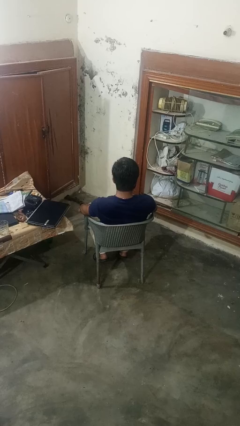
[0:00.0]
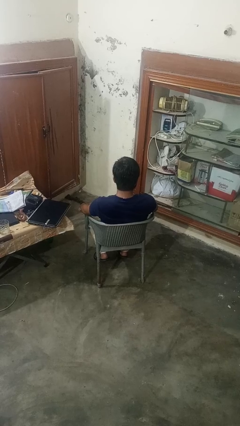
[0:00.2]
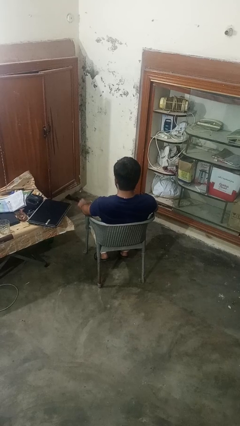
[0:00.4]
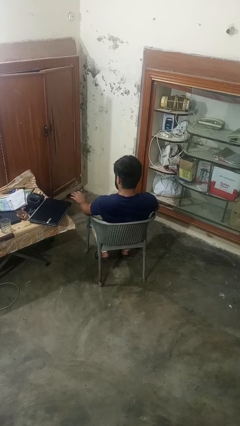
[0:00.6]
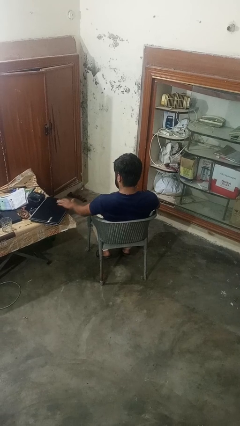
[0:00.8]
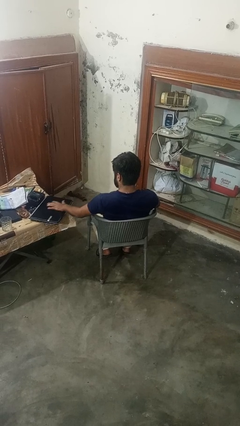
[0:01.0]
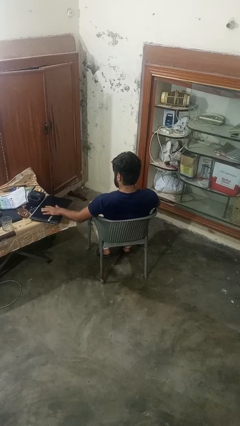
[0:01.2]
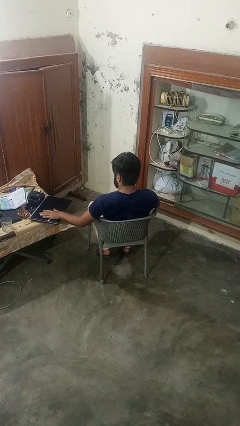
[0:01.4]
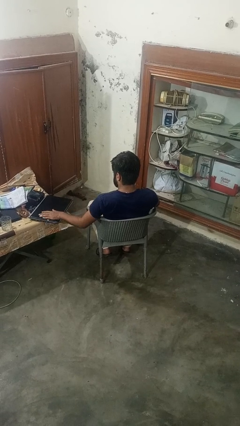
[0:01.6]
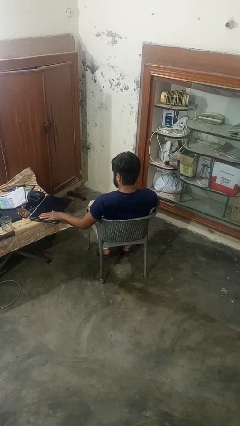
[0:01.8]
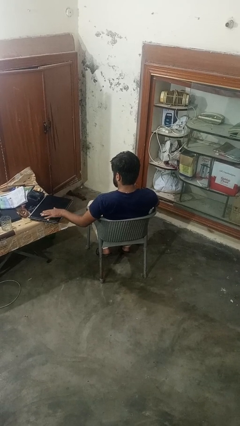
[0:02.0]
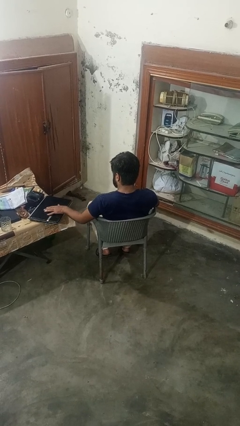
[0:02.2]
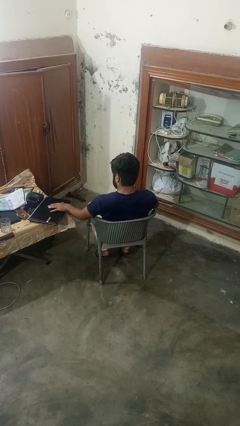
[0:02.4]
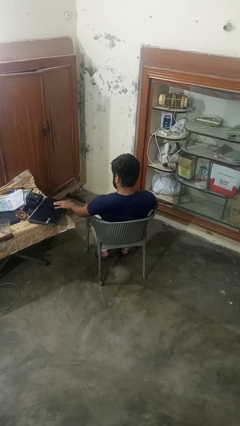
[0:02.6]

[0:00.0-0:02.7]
person waves hand over object

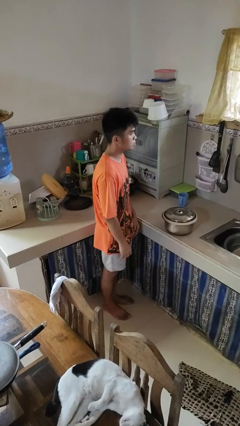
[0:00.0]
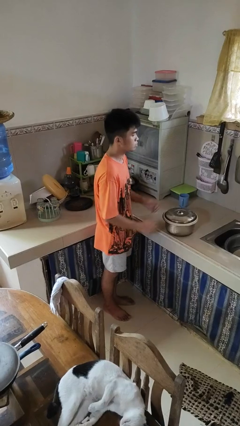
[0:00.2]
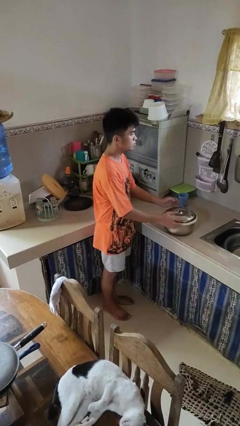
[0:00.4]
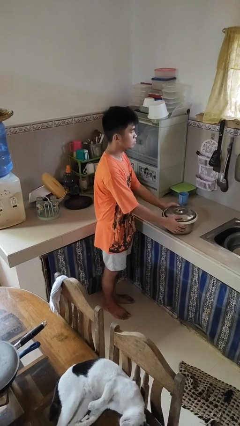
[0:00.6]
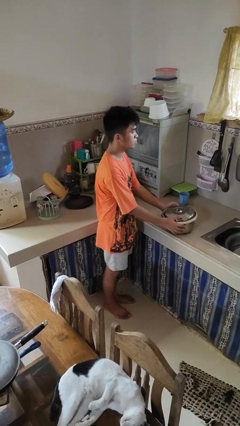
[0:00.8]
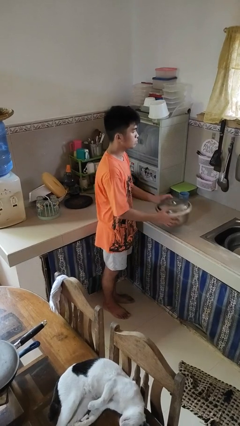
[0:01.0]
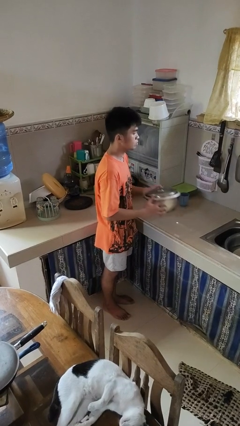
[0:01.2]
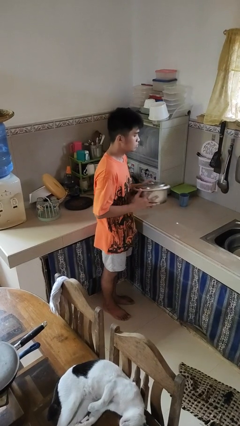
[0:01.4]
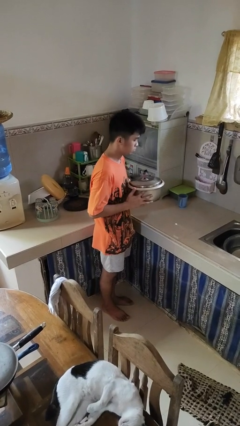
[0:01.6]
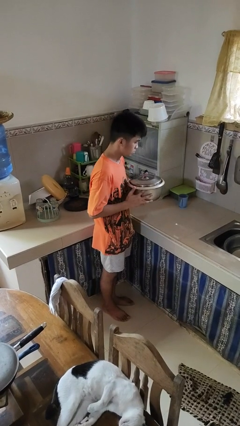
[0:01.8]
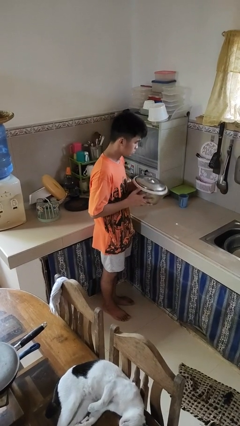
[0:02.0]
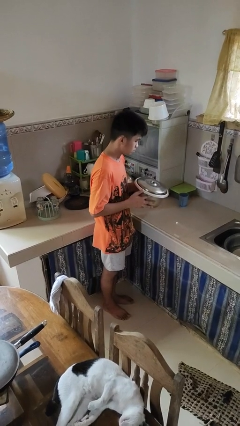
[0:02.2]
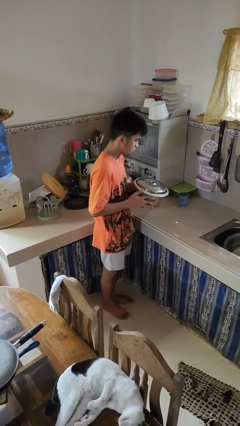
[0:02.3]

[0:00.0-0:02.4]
person picks up object from countertop

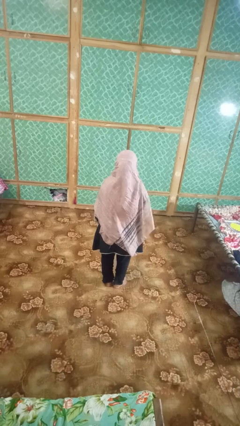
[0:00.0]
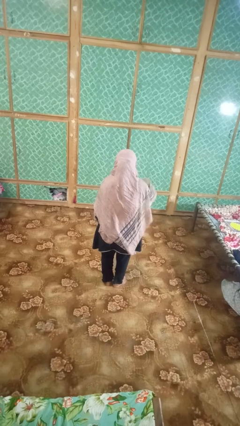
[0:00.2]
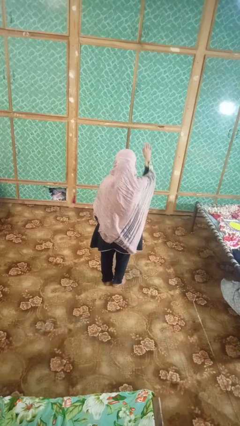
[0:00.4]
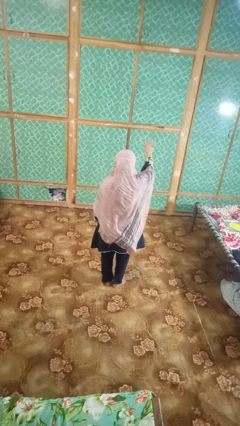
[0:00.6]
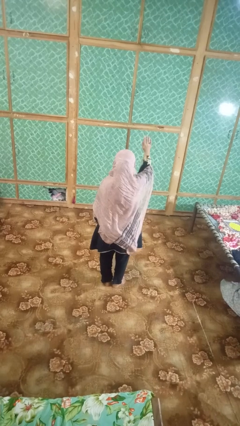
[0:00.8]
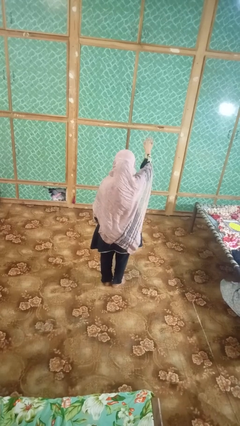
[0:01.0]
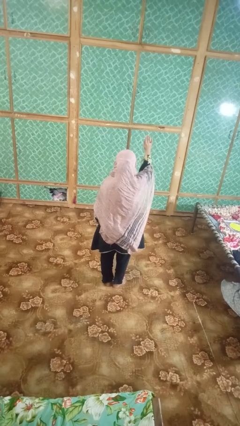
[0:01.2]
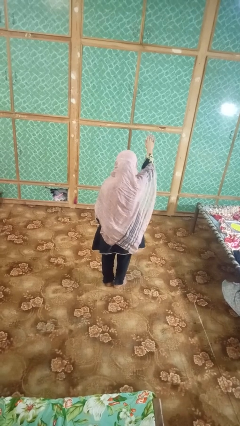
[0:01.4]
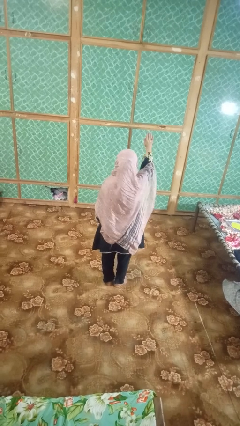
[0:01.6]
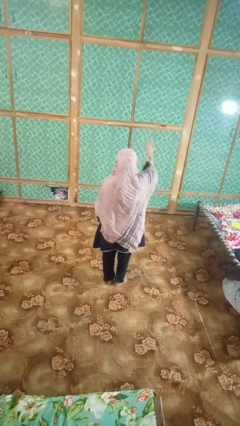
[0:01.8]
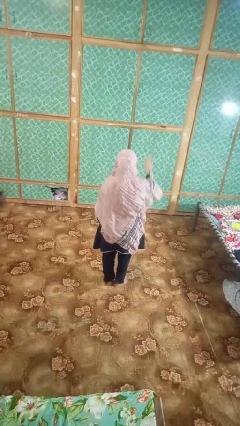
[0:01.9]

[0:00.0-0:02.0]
person gestures stop

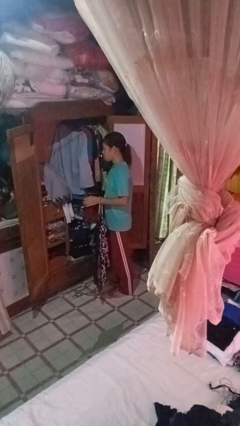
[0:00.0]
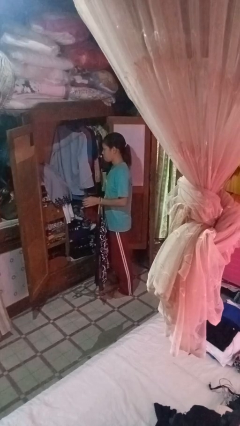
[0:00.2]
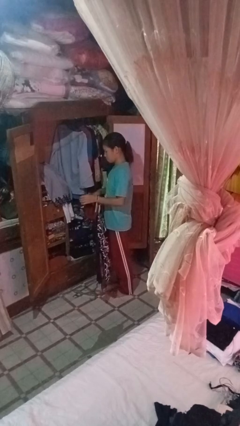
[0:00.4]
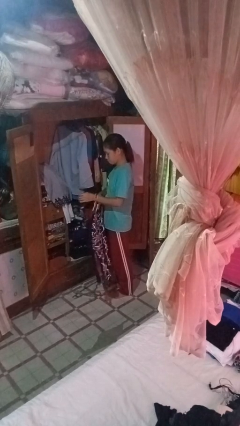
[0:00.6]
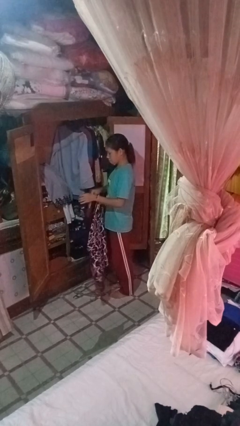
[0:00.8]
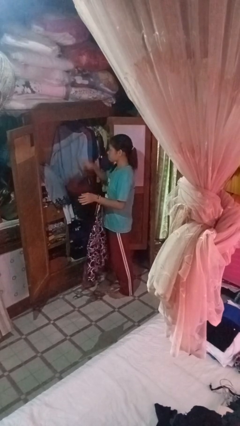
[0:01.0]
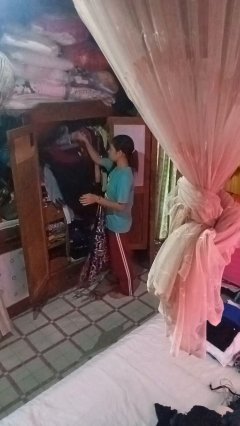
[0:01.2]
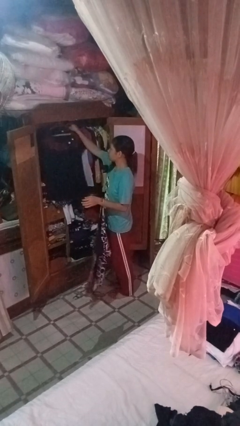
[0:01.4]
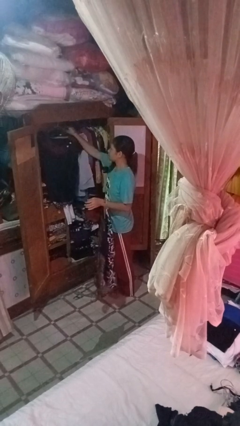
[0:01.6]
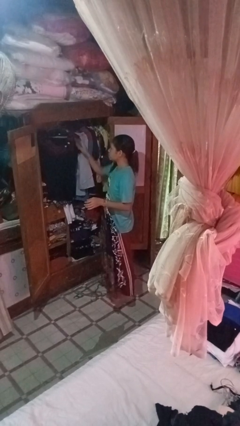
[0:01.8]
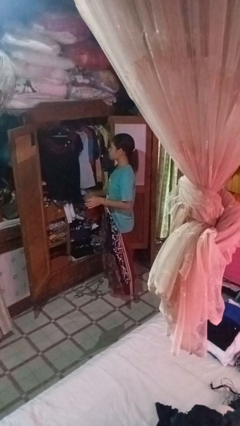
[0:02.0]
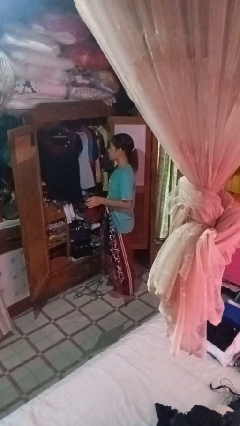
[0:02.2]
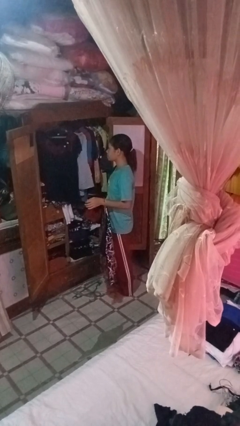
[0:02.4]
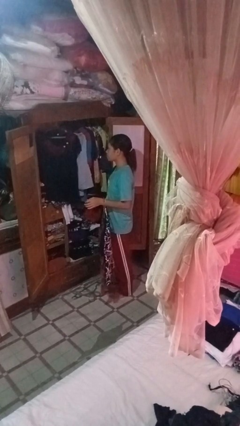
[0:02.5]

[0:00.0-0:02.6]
person puts clothes into closet

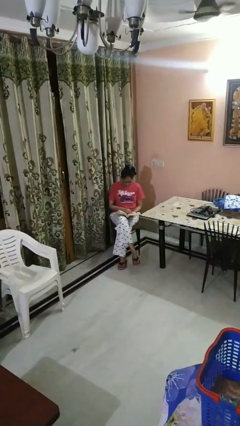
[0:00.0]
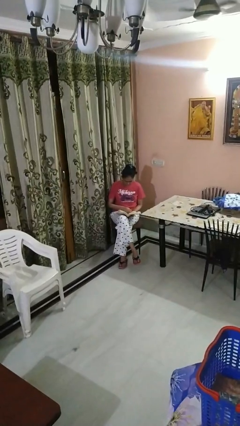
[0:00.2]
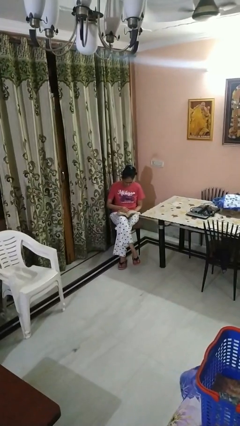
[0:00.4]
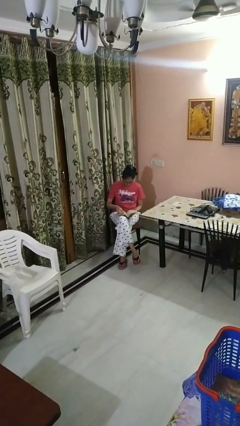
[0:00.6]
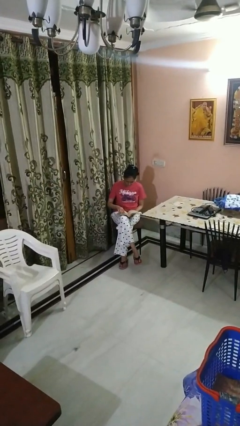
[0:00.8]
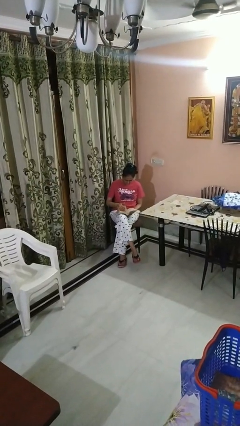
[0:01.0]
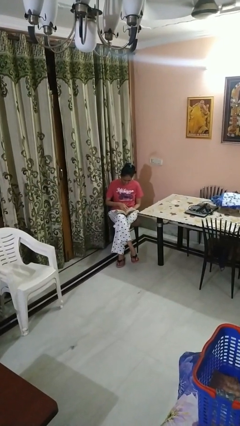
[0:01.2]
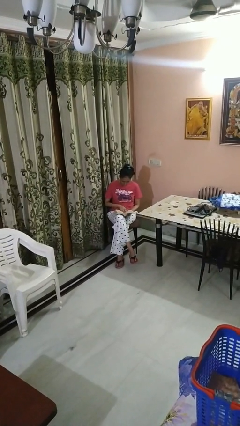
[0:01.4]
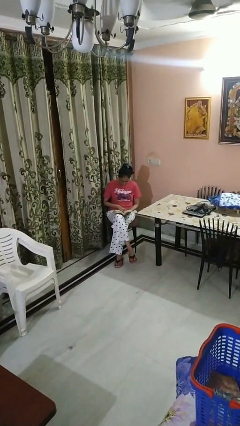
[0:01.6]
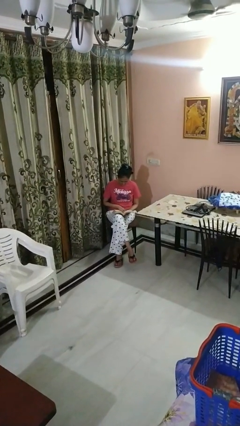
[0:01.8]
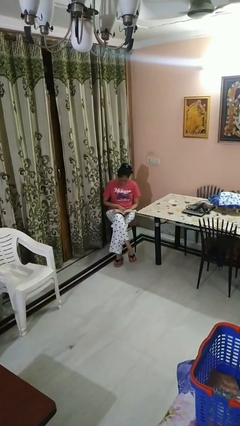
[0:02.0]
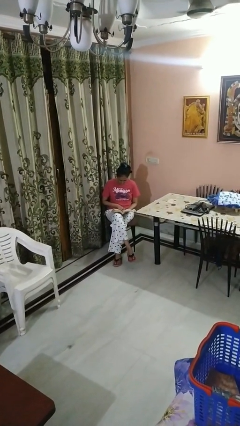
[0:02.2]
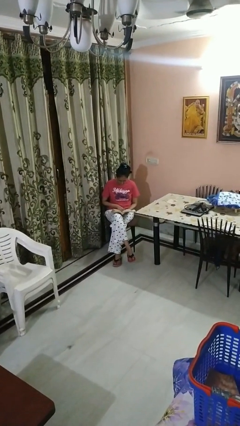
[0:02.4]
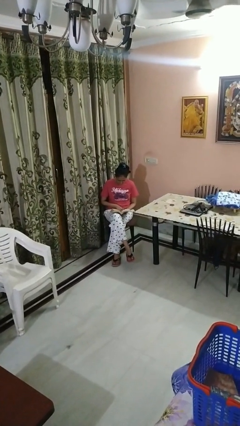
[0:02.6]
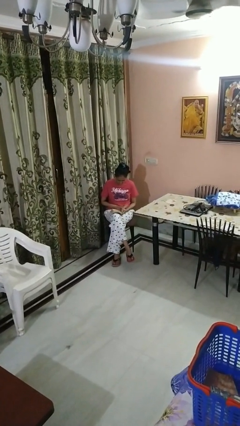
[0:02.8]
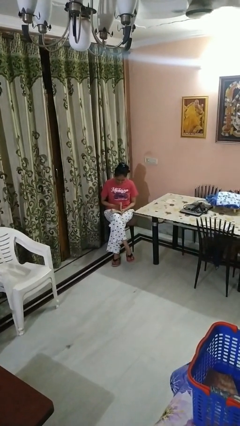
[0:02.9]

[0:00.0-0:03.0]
person reads book

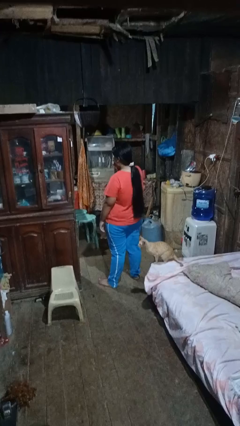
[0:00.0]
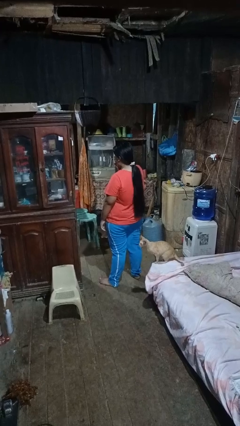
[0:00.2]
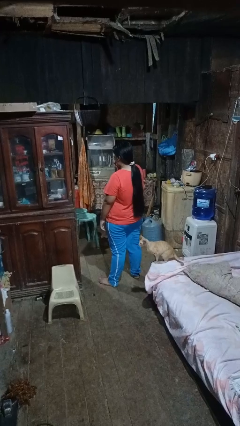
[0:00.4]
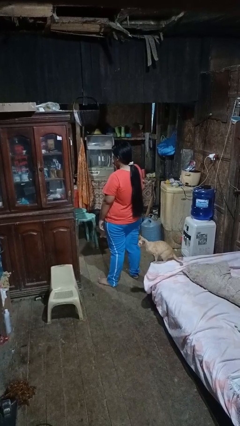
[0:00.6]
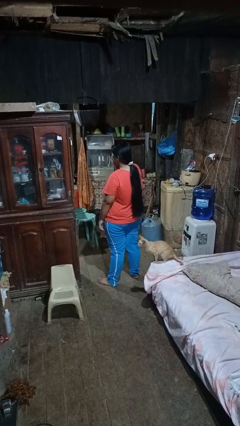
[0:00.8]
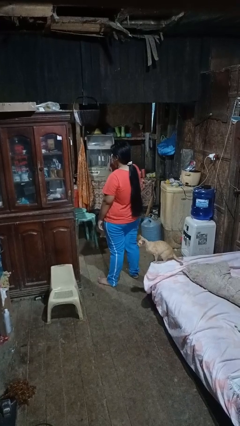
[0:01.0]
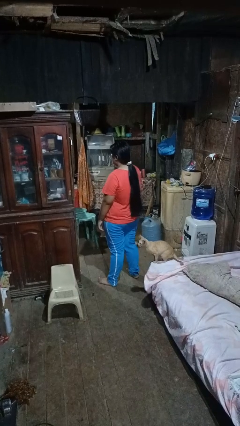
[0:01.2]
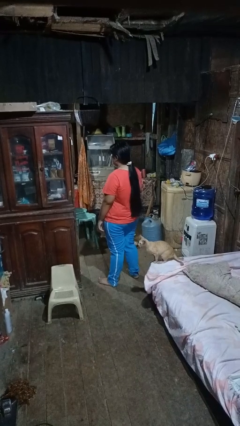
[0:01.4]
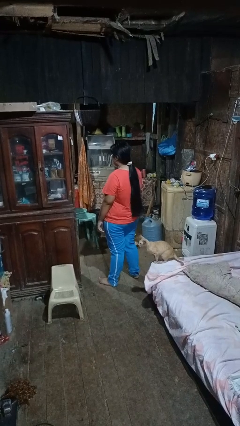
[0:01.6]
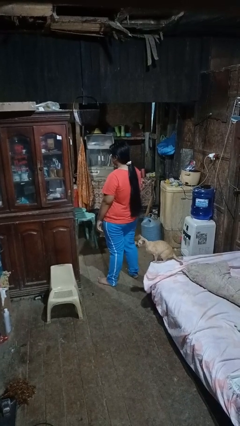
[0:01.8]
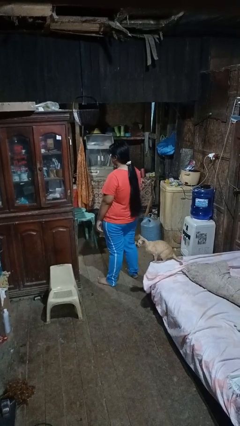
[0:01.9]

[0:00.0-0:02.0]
person yawns

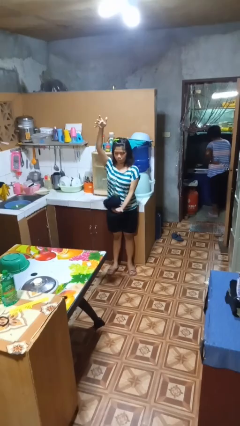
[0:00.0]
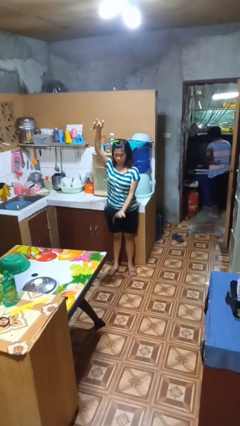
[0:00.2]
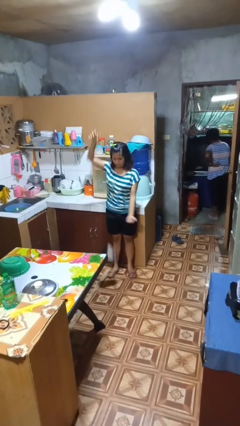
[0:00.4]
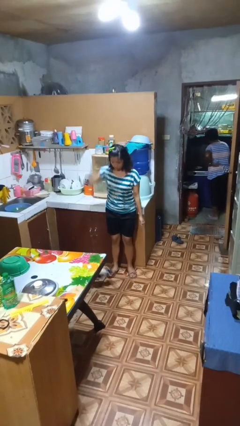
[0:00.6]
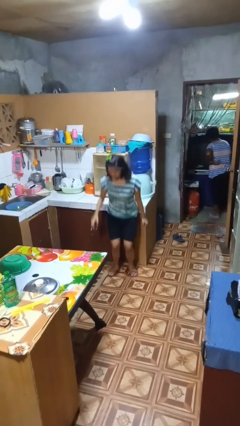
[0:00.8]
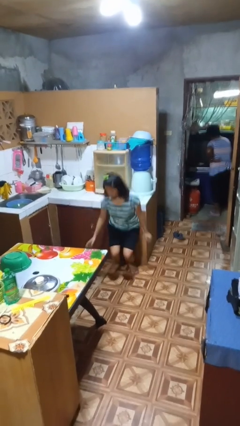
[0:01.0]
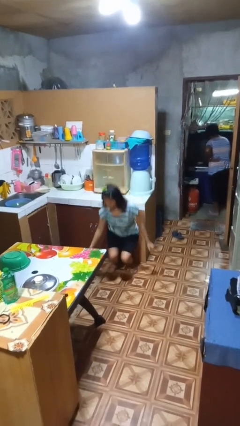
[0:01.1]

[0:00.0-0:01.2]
person catches dropped object

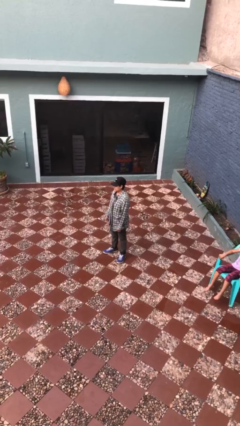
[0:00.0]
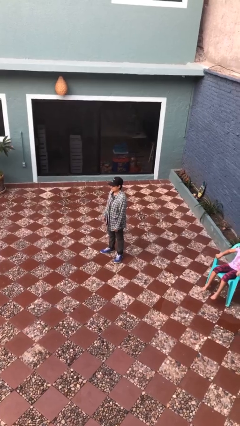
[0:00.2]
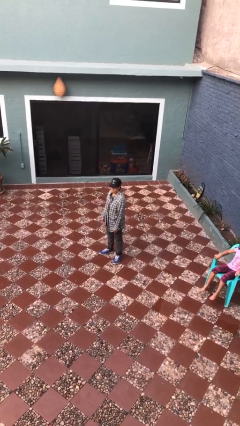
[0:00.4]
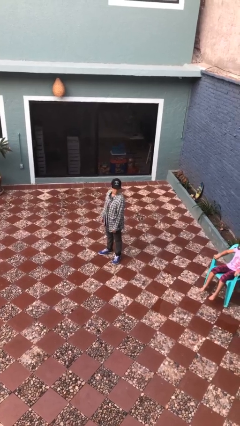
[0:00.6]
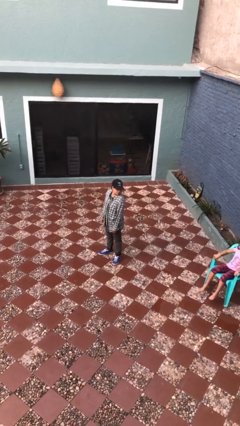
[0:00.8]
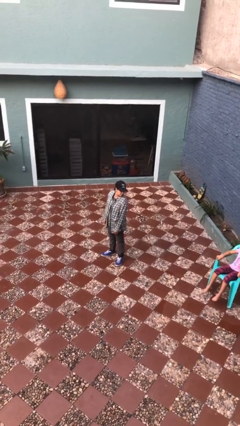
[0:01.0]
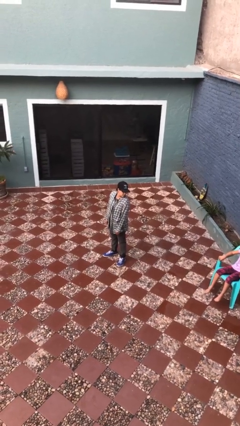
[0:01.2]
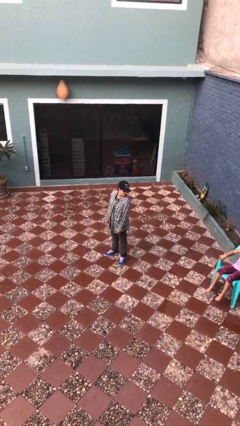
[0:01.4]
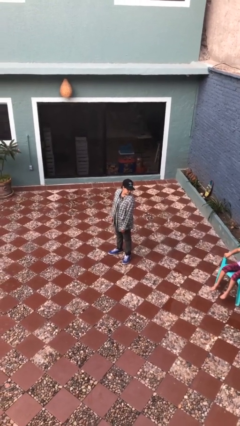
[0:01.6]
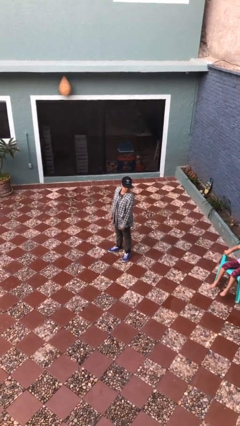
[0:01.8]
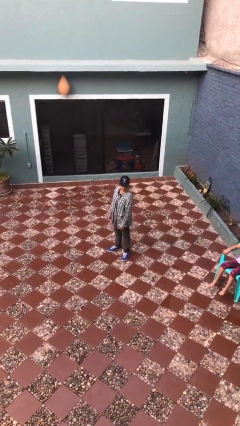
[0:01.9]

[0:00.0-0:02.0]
person looks over shoulder
